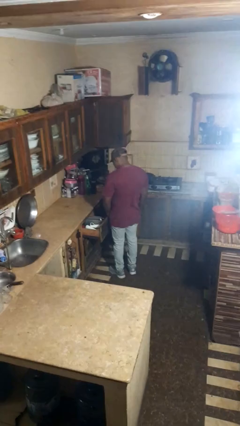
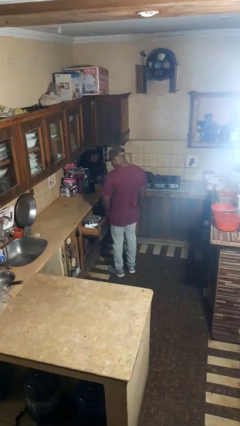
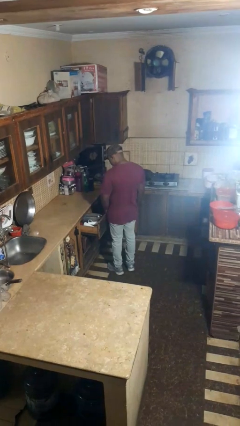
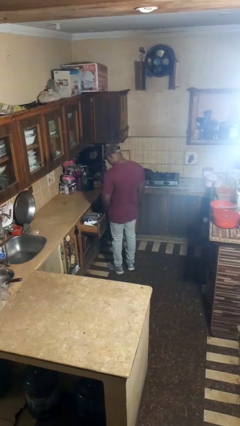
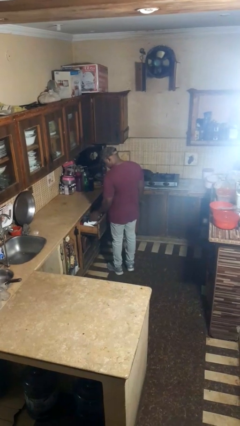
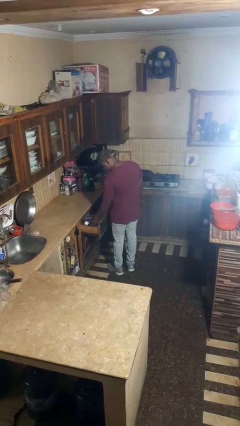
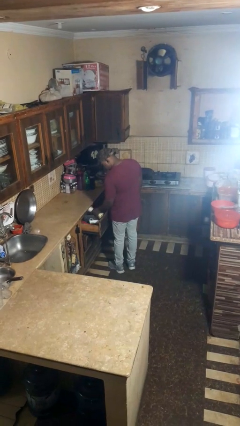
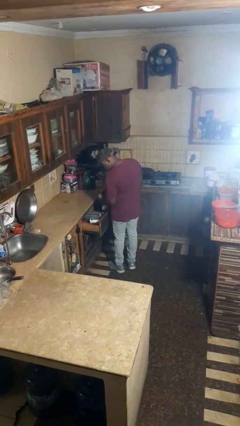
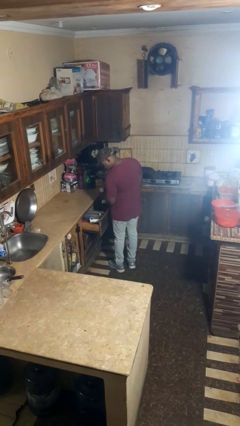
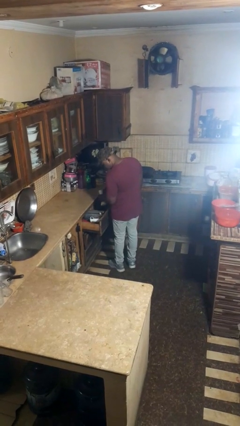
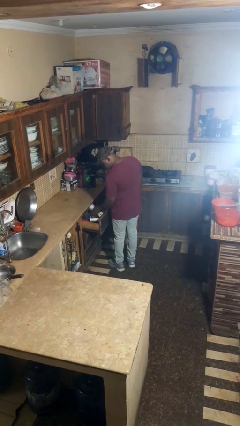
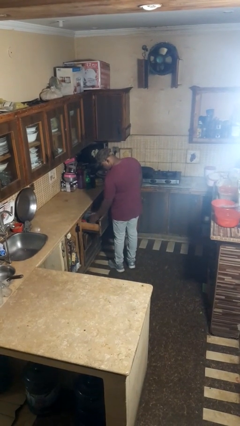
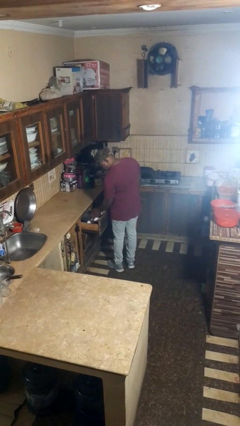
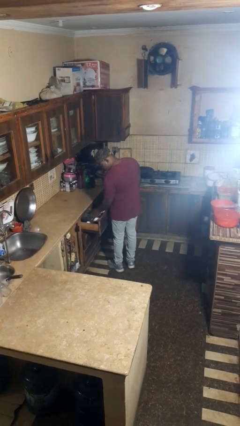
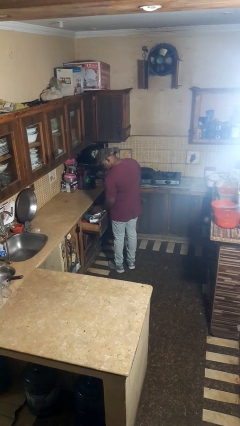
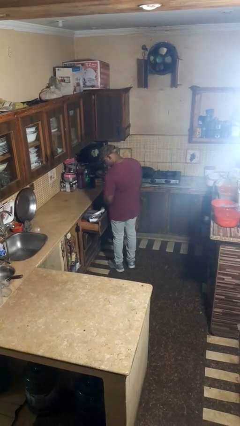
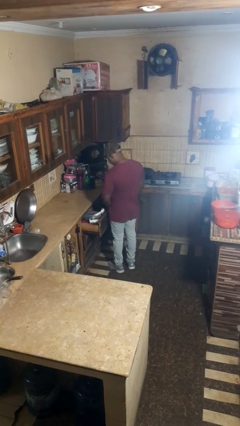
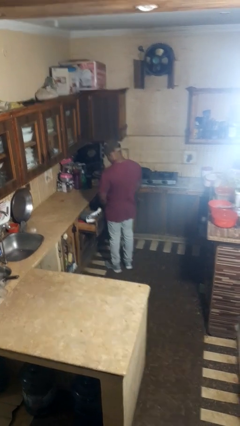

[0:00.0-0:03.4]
person searches in kitchen drawer

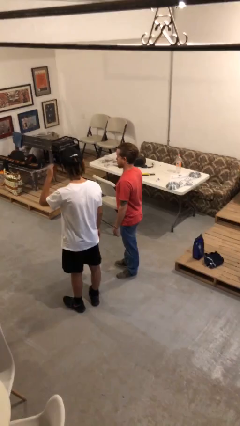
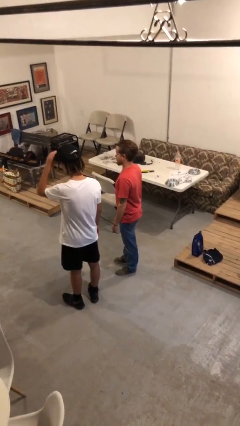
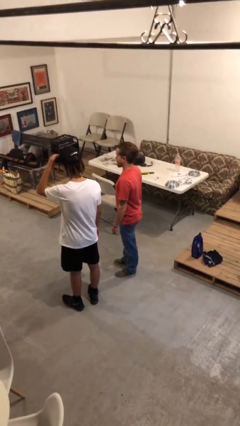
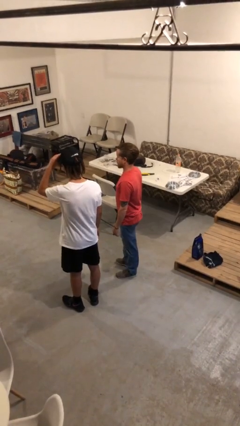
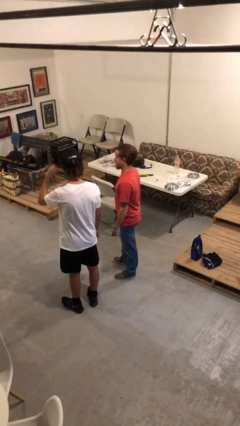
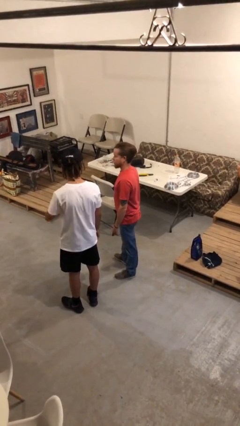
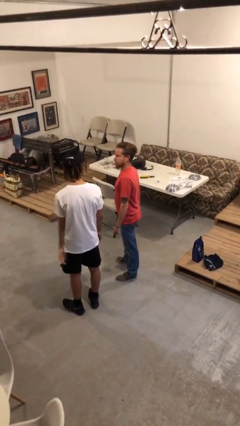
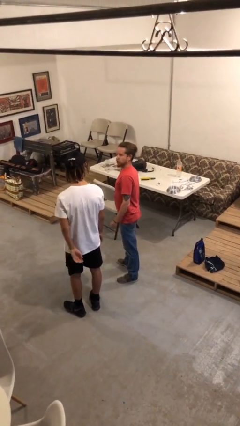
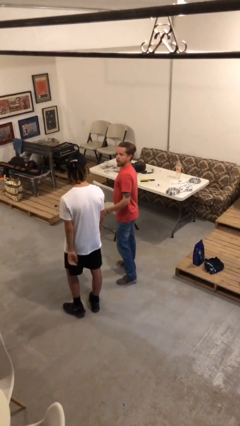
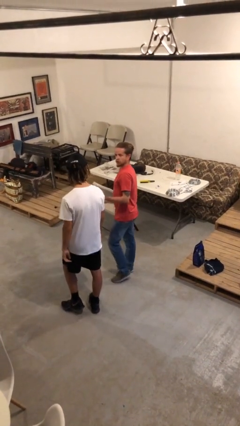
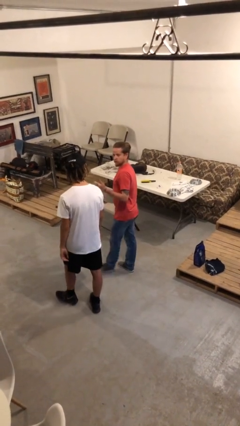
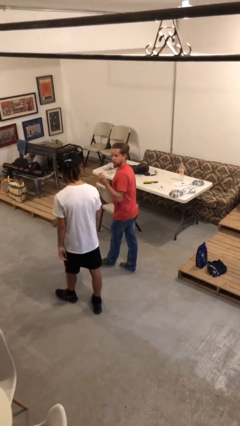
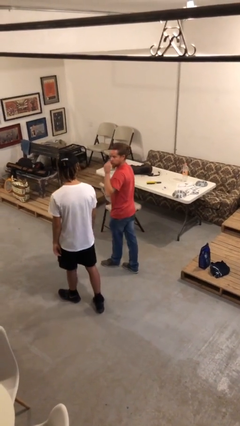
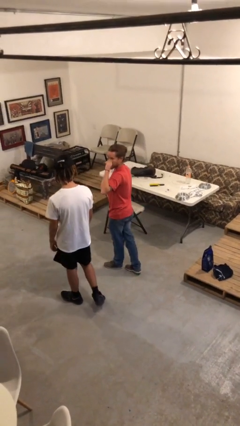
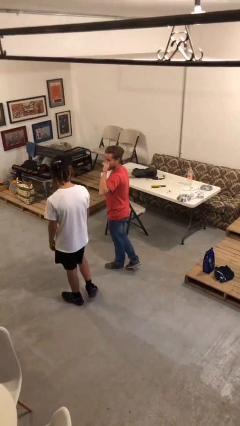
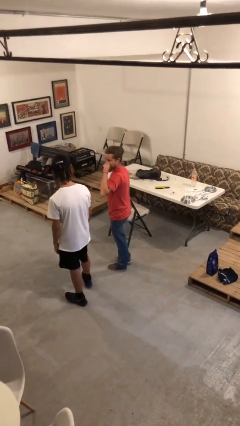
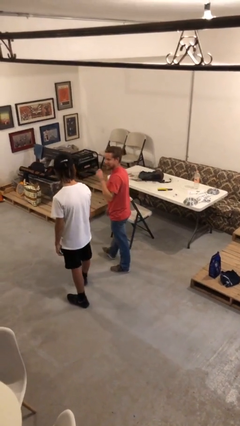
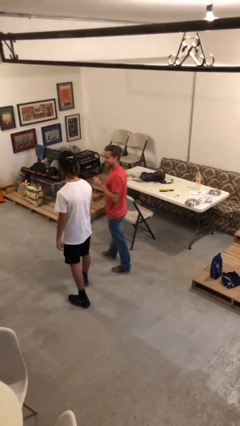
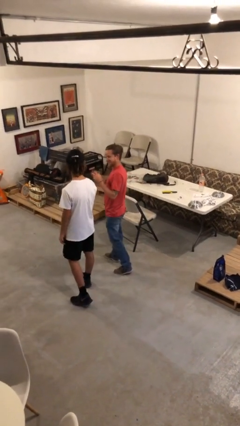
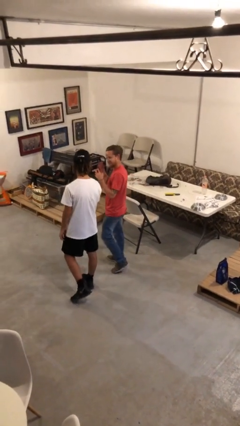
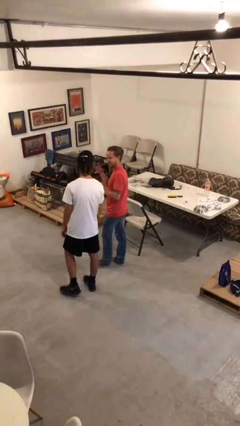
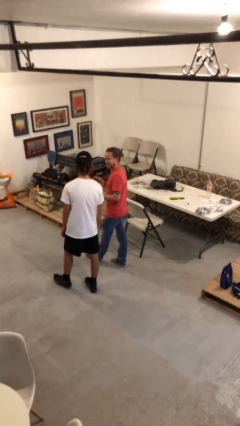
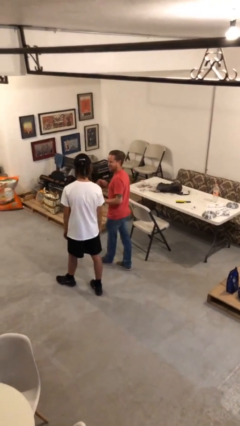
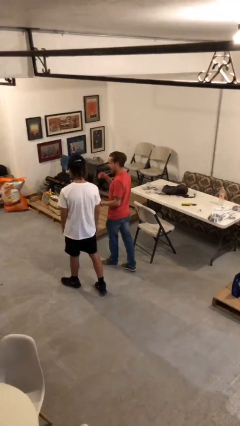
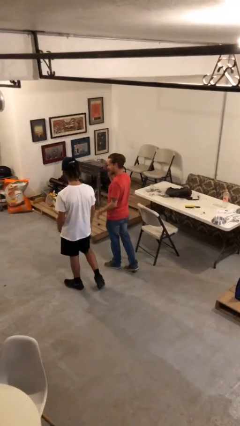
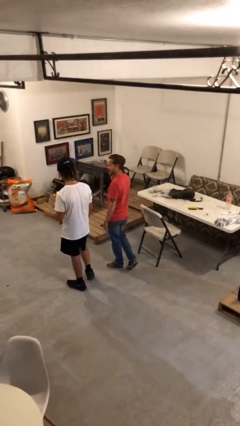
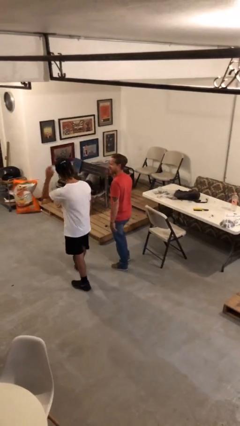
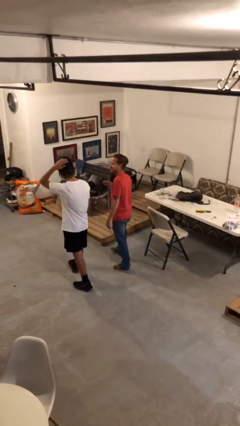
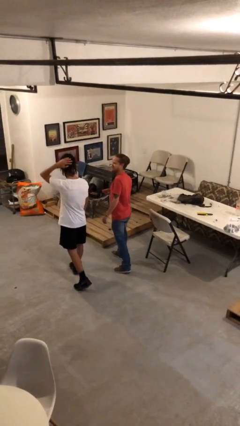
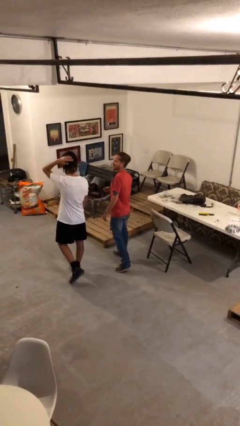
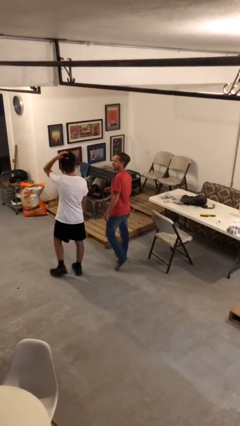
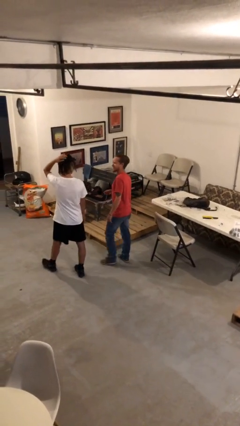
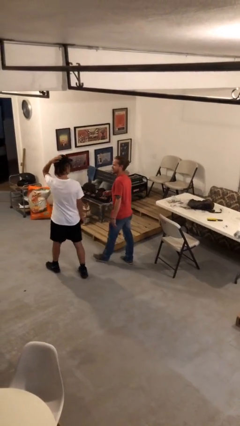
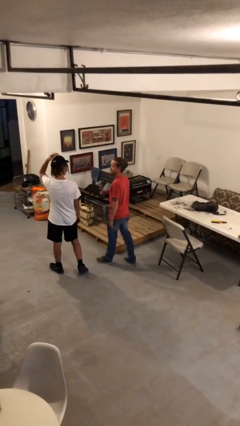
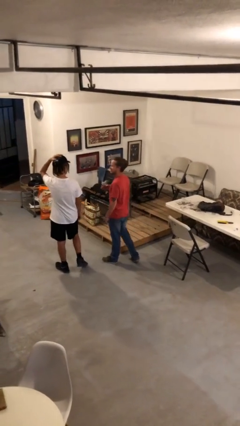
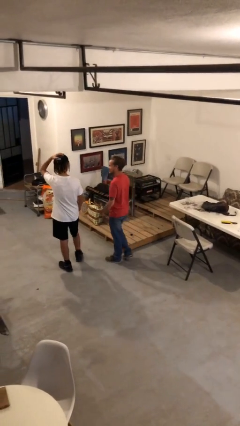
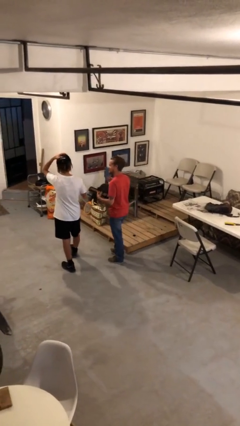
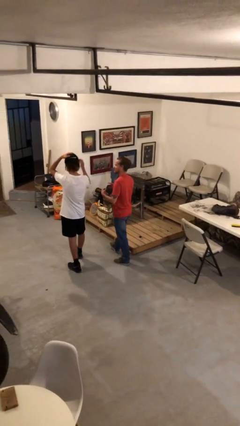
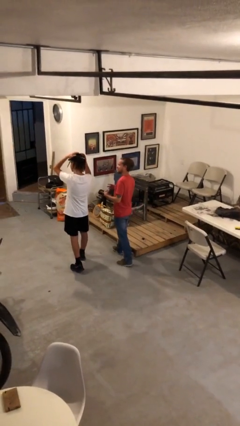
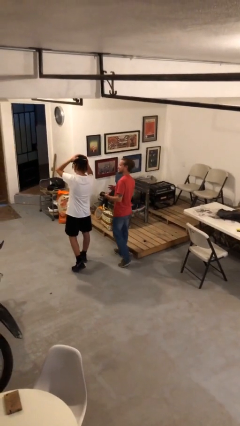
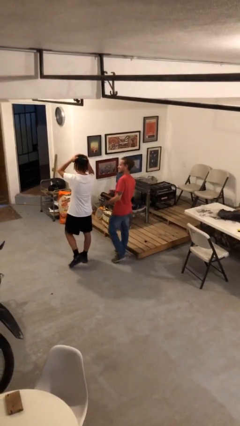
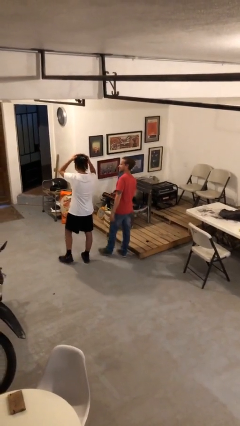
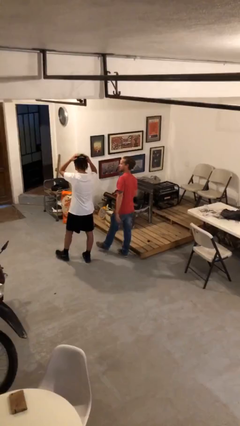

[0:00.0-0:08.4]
person talks to person

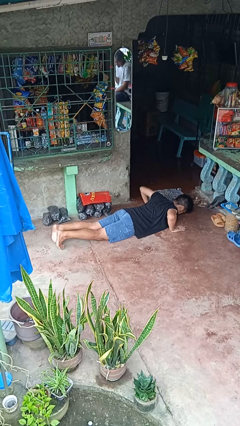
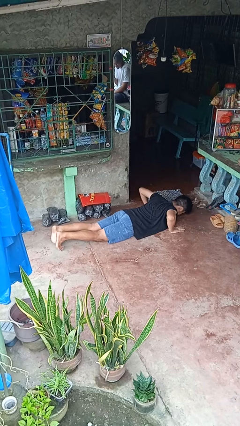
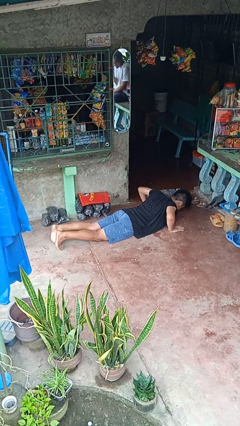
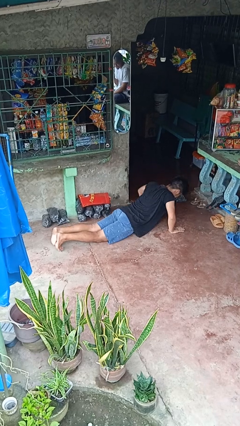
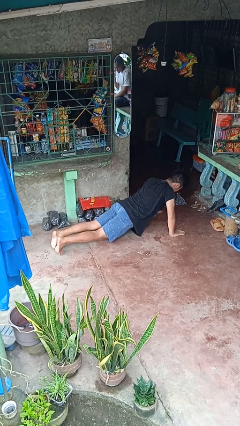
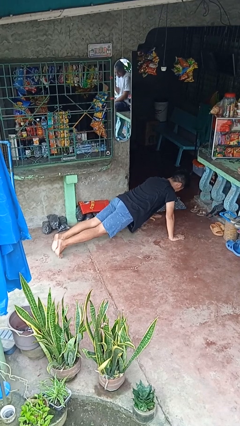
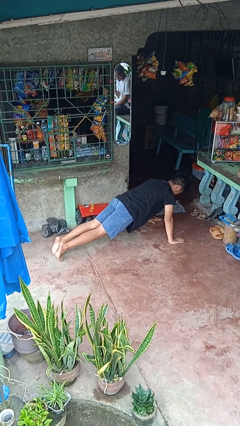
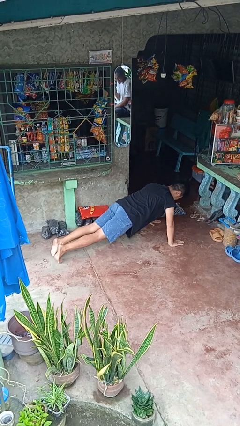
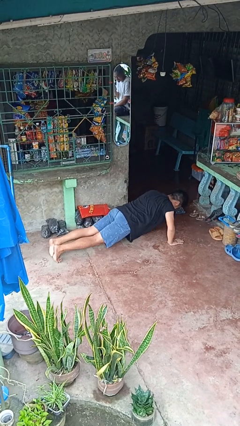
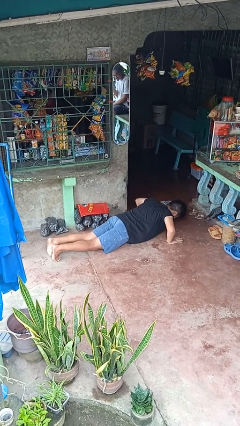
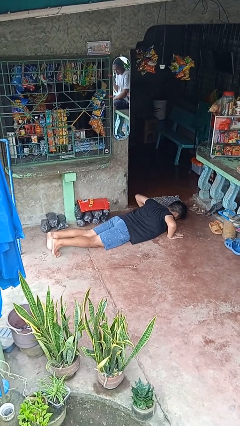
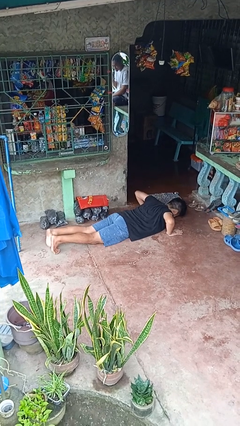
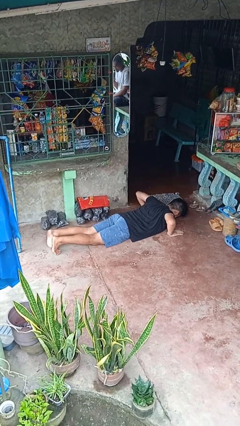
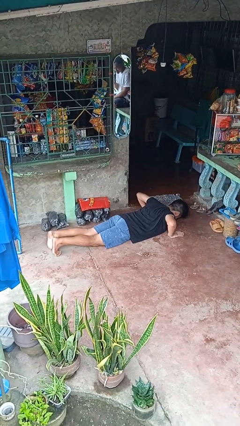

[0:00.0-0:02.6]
person exercises with pushup

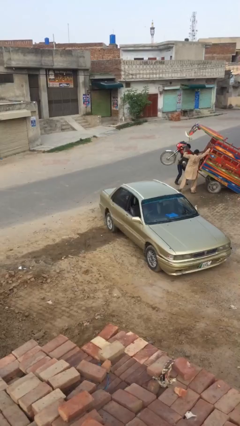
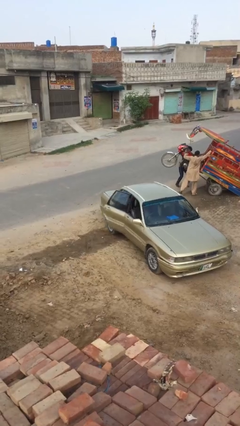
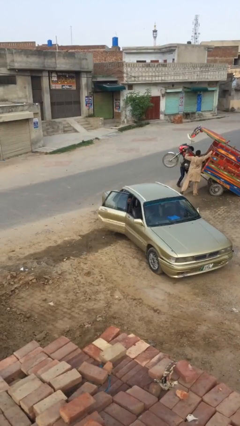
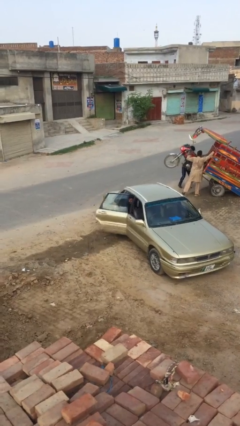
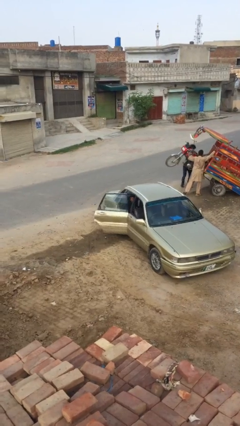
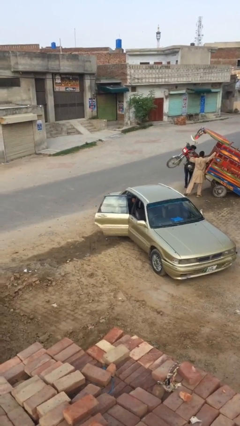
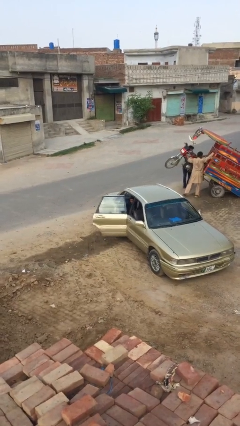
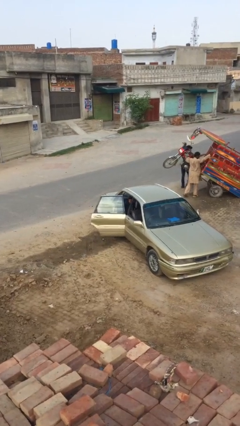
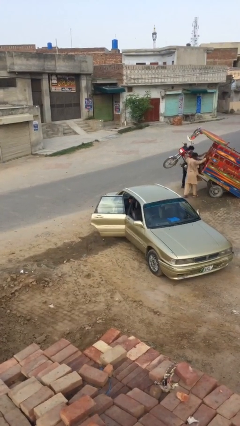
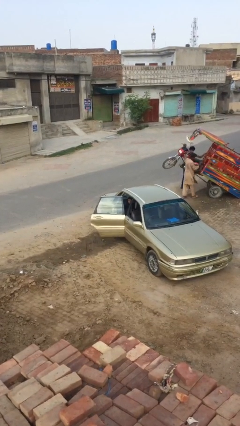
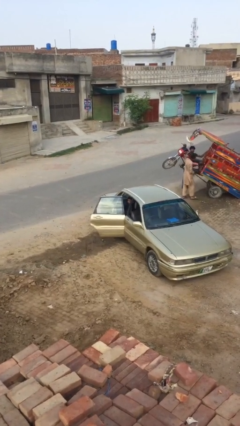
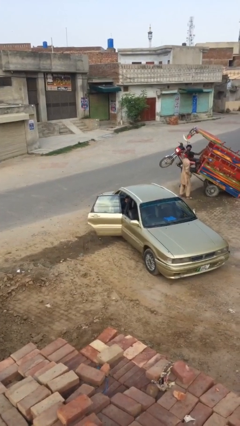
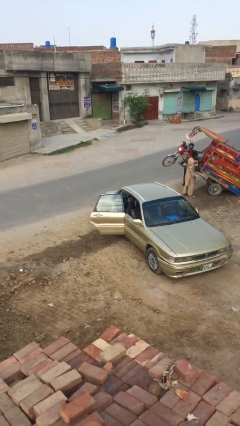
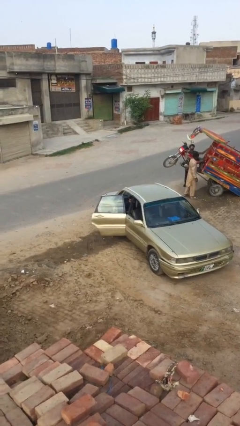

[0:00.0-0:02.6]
person opens car door

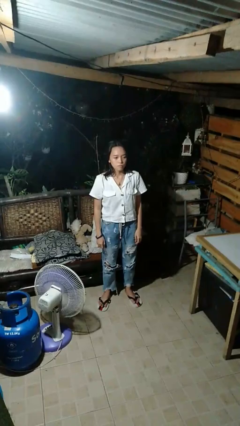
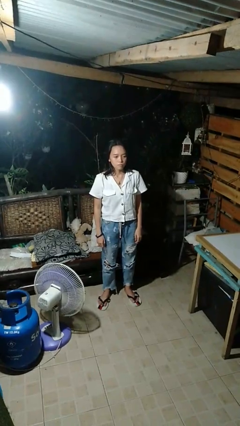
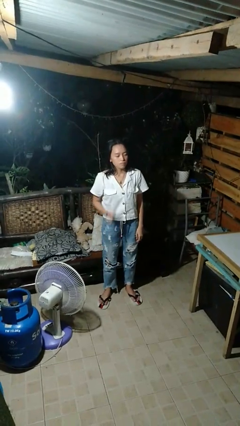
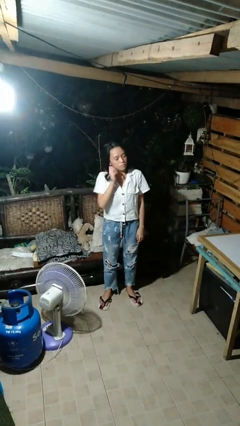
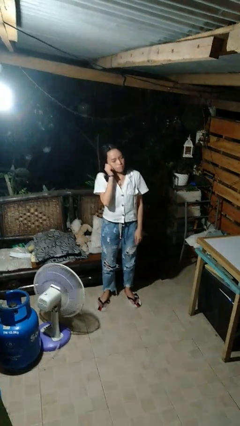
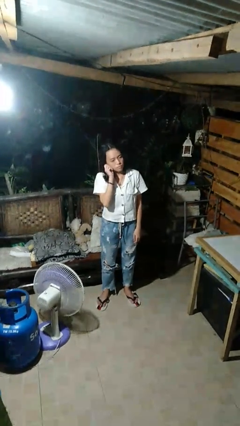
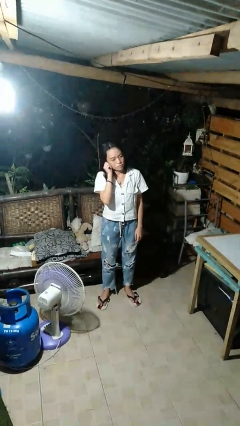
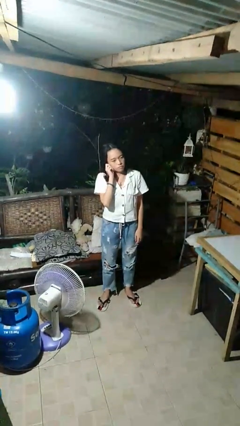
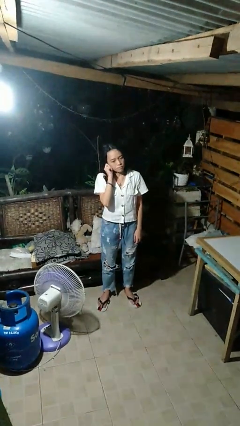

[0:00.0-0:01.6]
person touches earlobe
